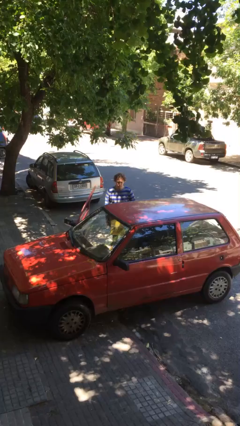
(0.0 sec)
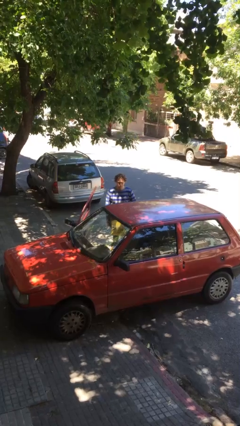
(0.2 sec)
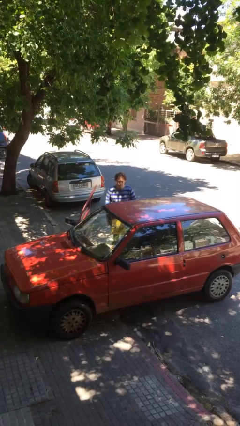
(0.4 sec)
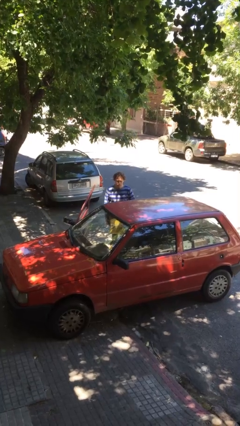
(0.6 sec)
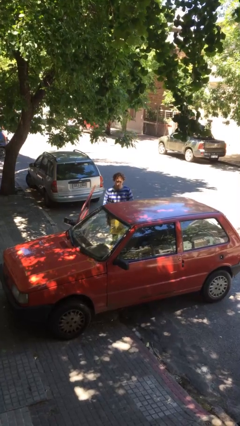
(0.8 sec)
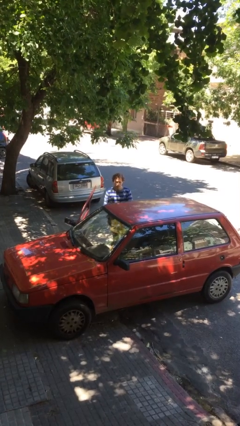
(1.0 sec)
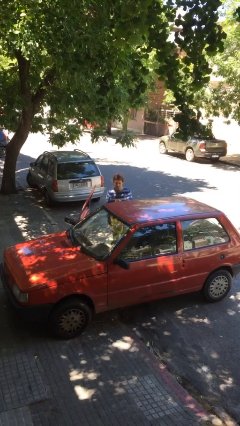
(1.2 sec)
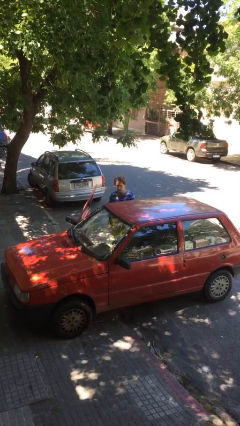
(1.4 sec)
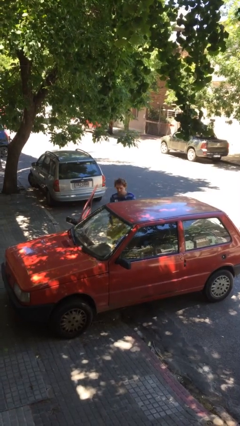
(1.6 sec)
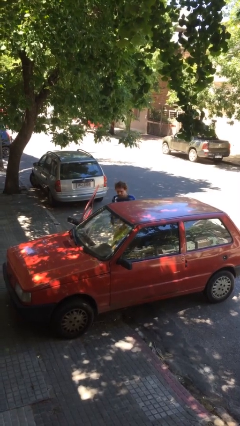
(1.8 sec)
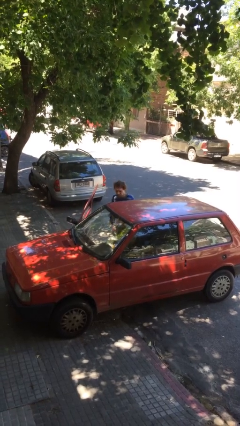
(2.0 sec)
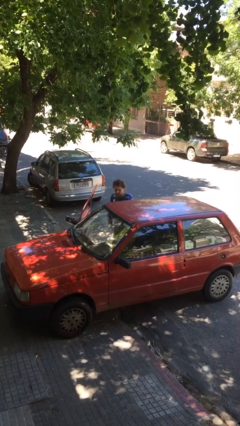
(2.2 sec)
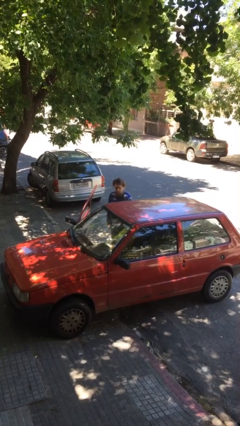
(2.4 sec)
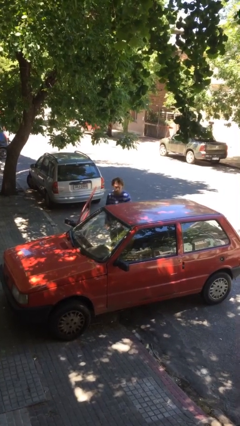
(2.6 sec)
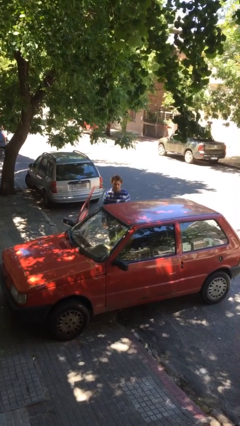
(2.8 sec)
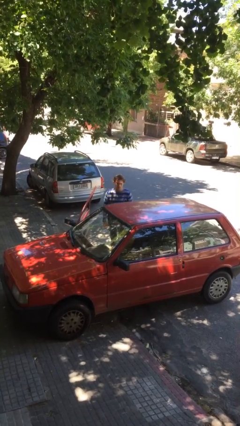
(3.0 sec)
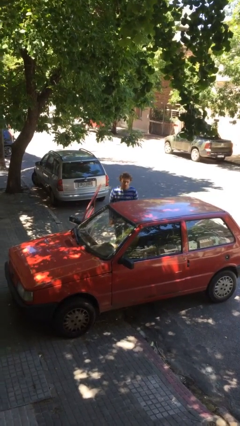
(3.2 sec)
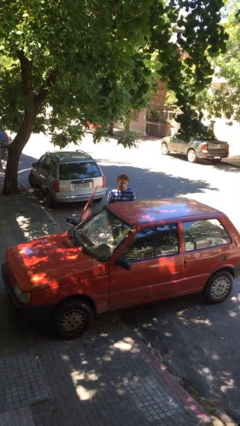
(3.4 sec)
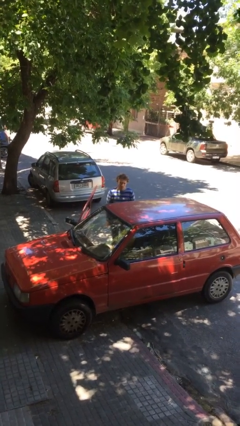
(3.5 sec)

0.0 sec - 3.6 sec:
person loads car

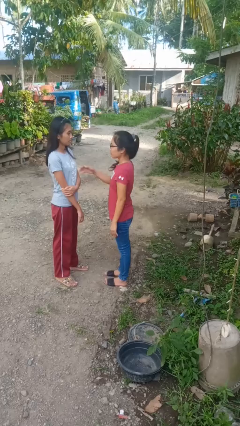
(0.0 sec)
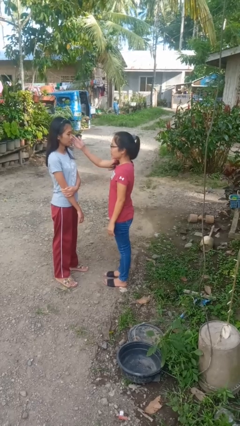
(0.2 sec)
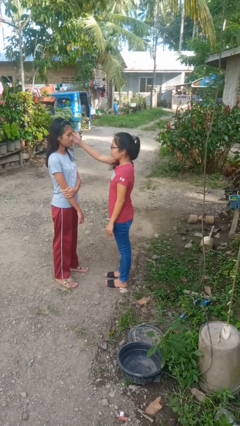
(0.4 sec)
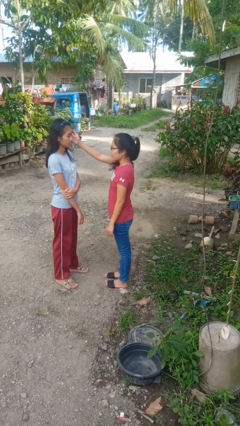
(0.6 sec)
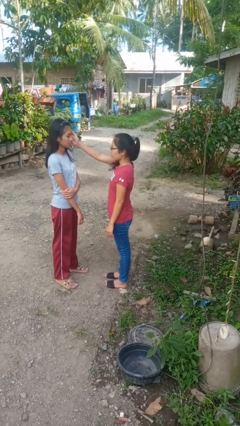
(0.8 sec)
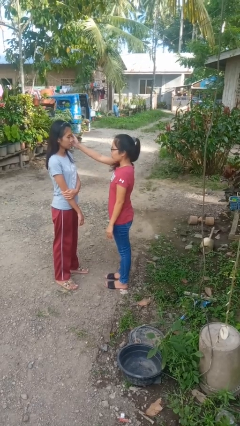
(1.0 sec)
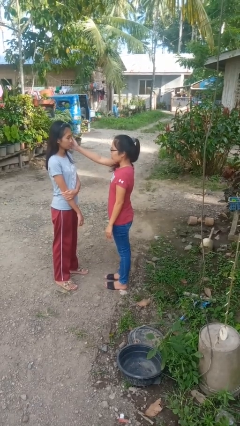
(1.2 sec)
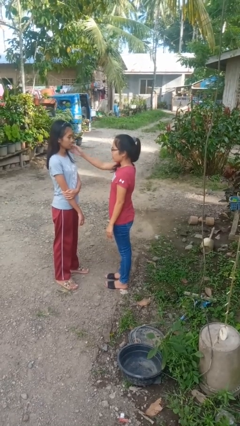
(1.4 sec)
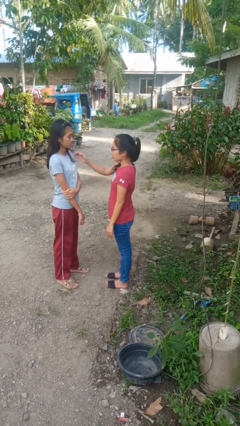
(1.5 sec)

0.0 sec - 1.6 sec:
person touches face of person

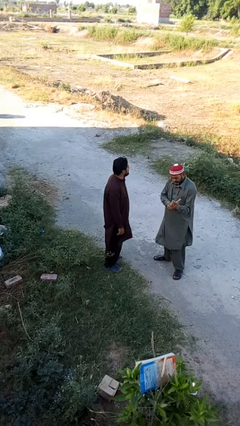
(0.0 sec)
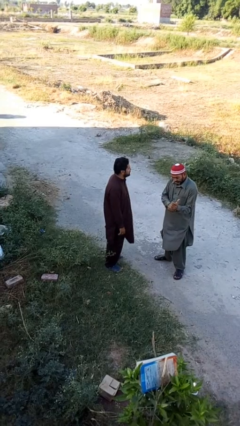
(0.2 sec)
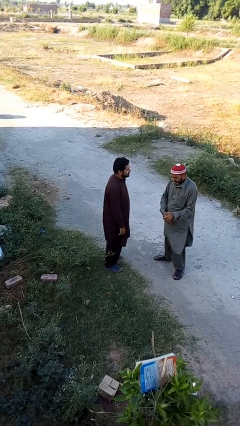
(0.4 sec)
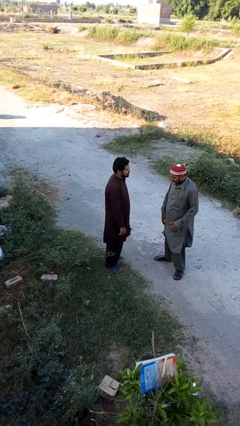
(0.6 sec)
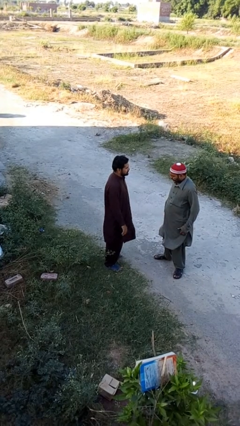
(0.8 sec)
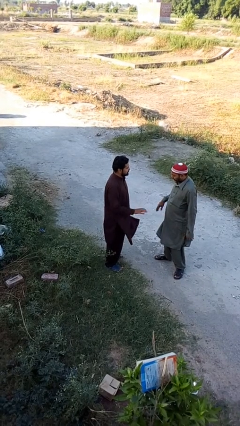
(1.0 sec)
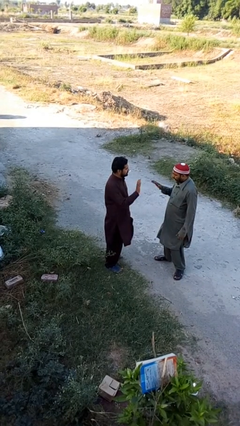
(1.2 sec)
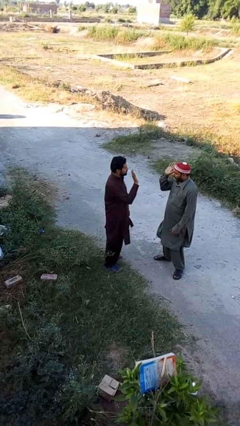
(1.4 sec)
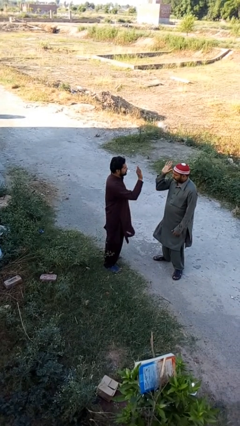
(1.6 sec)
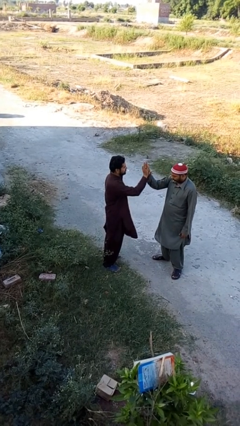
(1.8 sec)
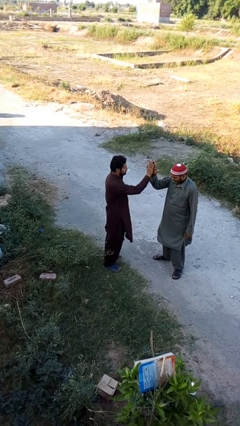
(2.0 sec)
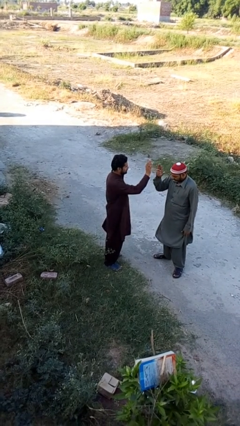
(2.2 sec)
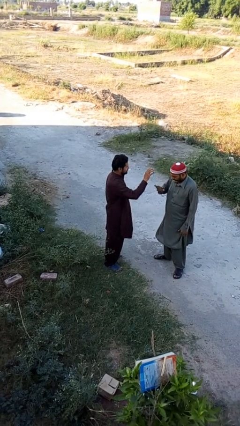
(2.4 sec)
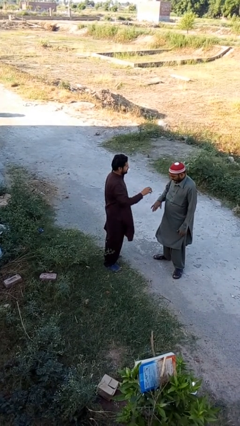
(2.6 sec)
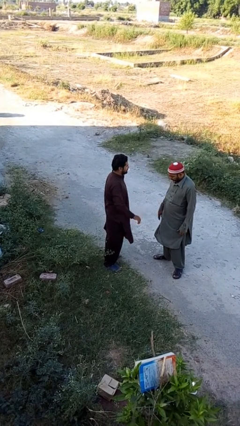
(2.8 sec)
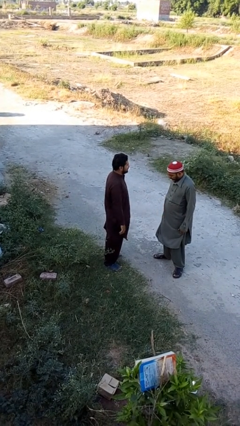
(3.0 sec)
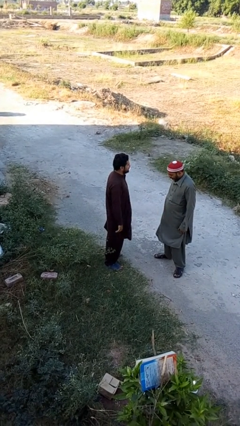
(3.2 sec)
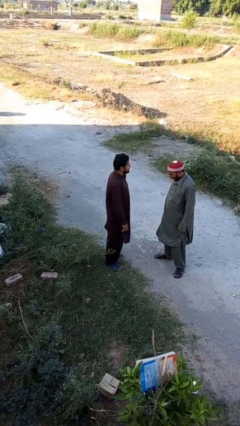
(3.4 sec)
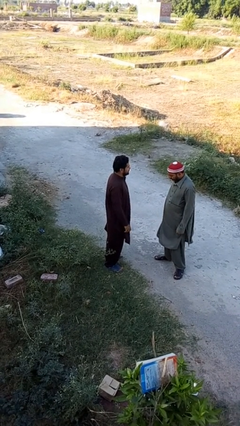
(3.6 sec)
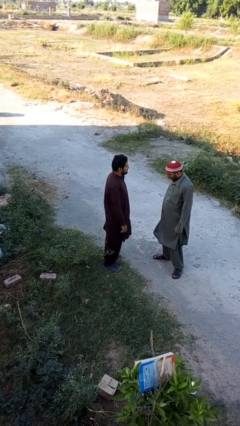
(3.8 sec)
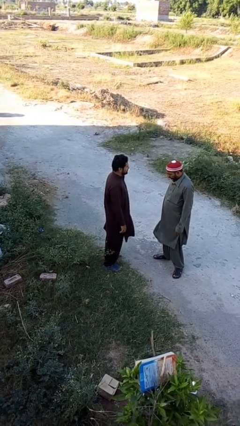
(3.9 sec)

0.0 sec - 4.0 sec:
person highfives hand

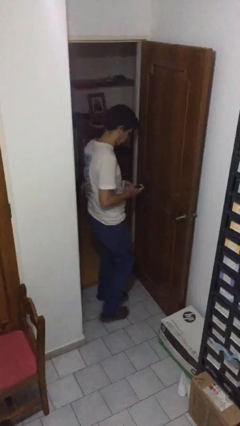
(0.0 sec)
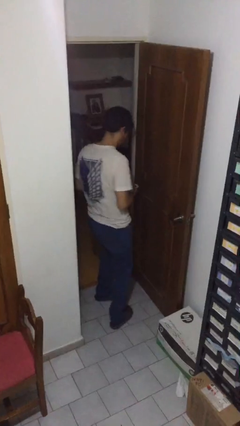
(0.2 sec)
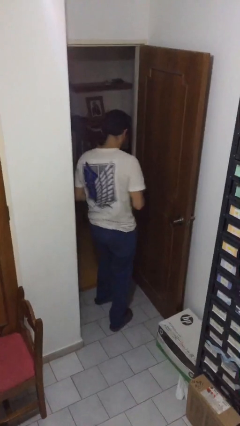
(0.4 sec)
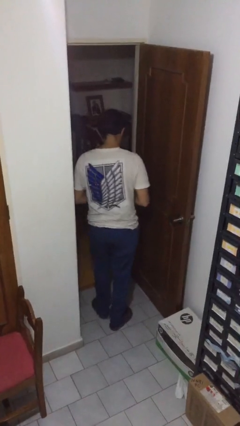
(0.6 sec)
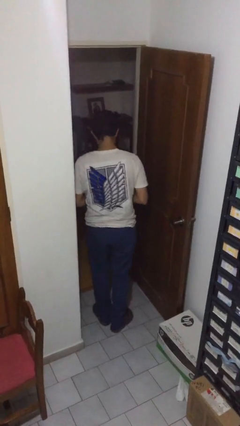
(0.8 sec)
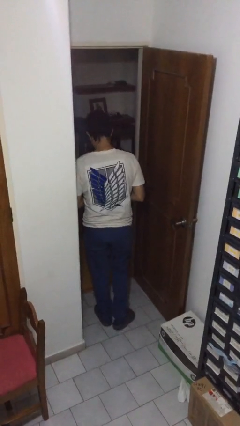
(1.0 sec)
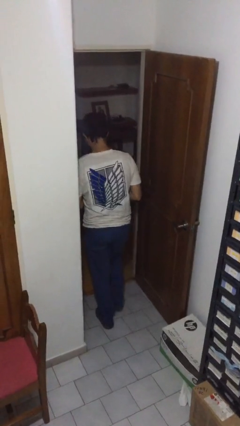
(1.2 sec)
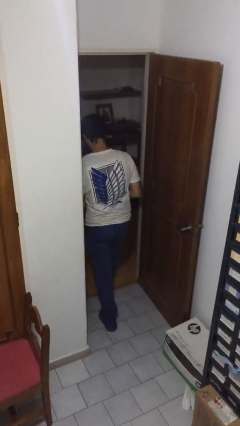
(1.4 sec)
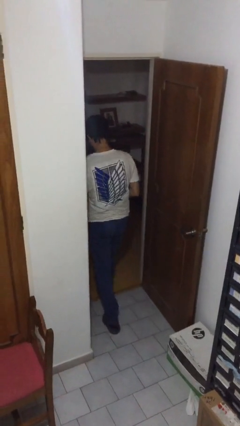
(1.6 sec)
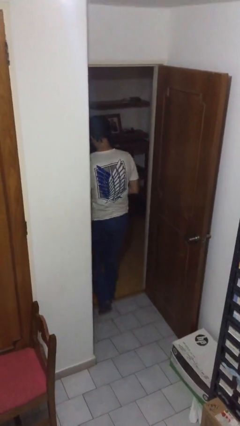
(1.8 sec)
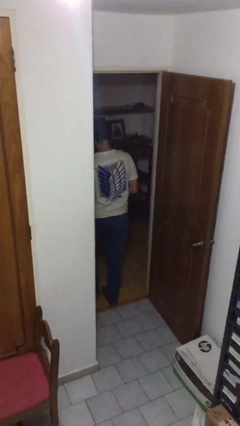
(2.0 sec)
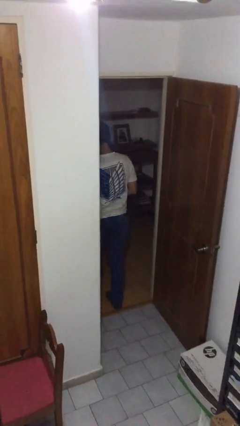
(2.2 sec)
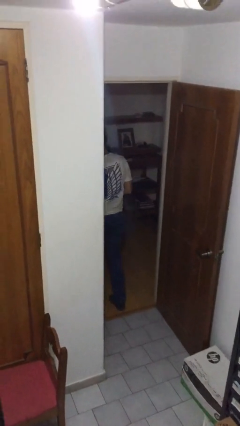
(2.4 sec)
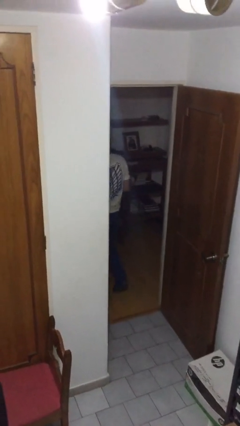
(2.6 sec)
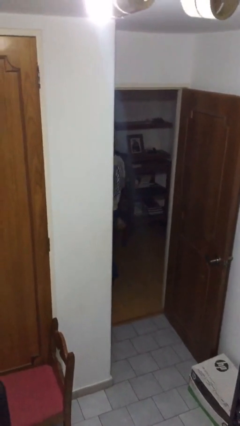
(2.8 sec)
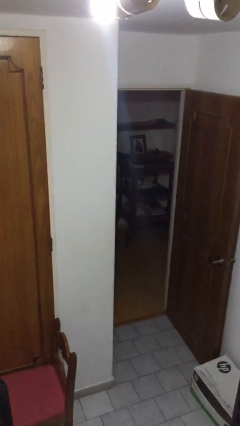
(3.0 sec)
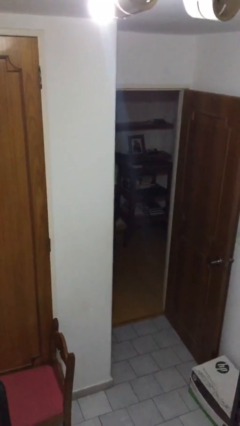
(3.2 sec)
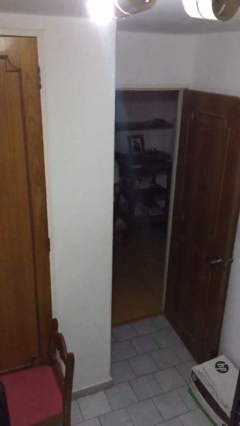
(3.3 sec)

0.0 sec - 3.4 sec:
person exits scene through structure

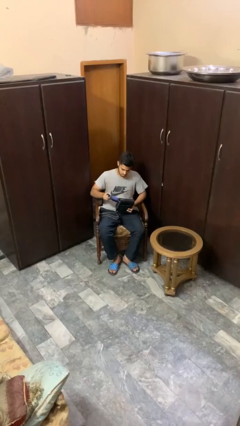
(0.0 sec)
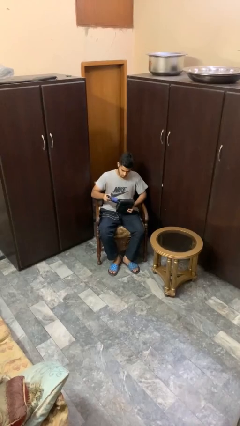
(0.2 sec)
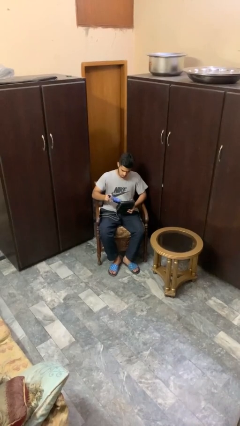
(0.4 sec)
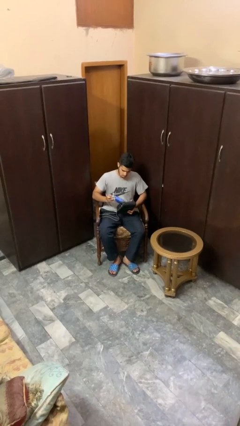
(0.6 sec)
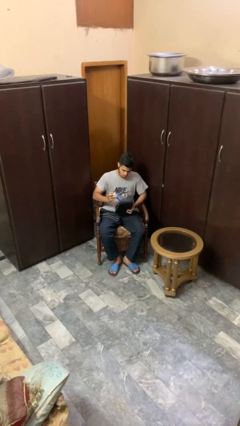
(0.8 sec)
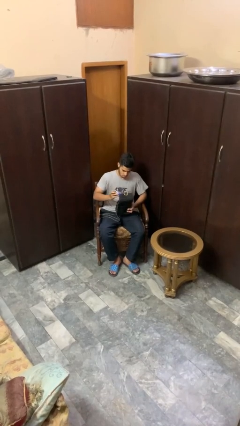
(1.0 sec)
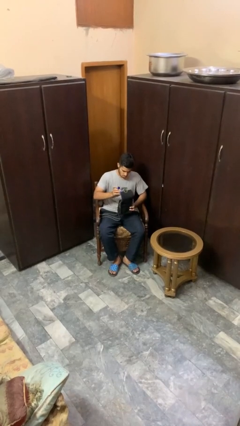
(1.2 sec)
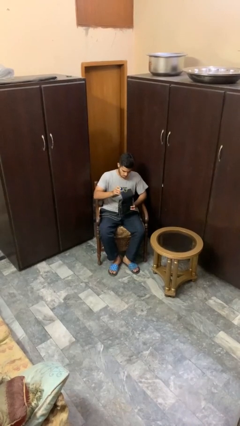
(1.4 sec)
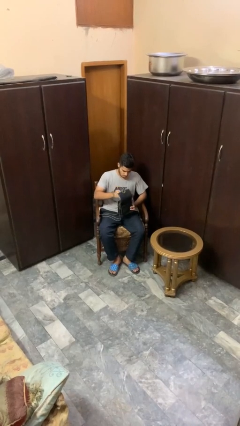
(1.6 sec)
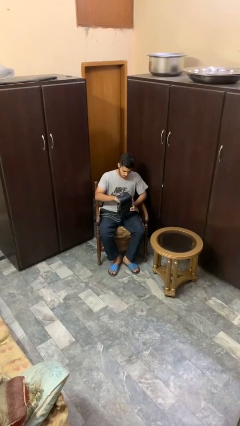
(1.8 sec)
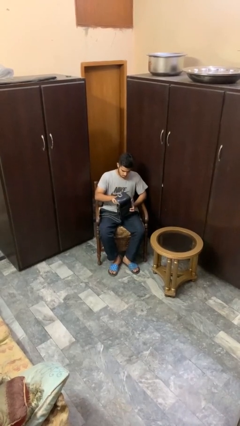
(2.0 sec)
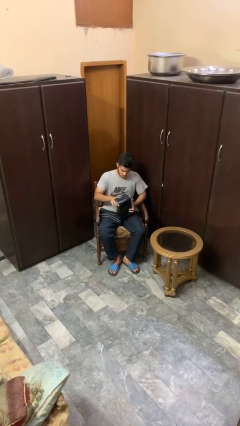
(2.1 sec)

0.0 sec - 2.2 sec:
person puts object into purse

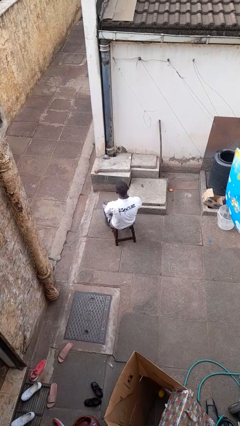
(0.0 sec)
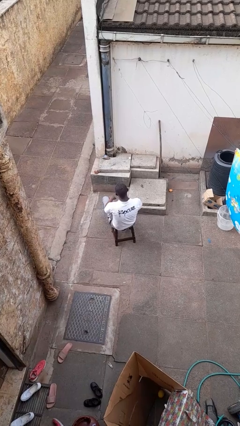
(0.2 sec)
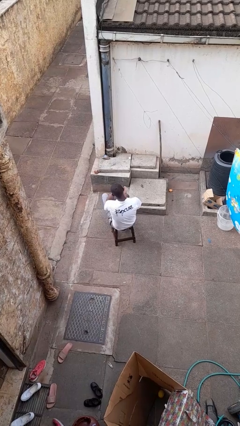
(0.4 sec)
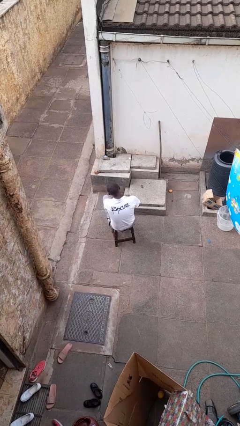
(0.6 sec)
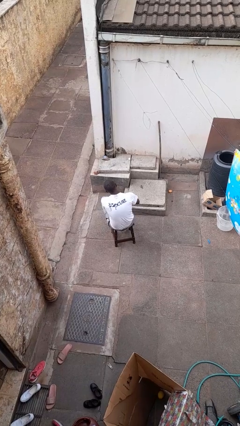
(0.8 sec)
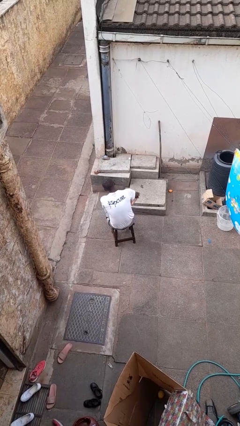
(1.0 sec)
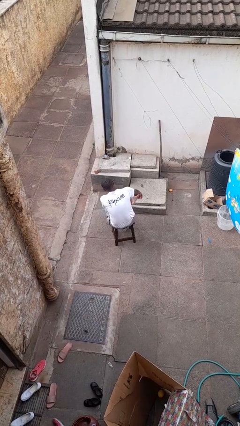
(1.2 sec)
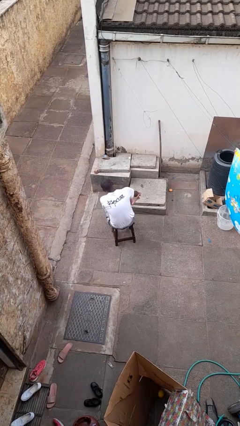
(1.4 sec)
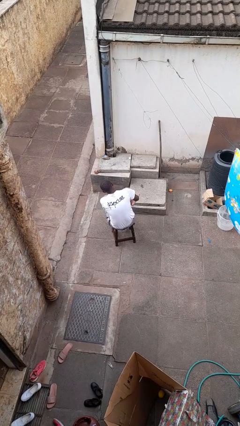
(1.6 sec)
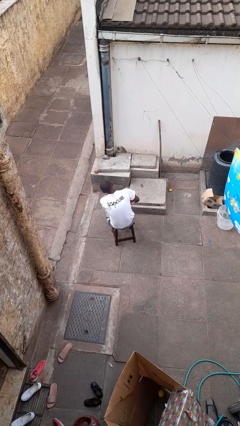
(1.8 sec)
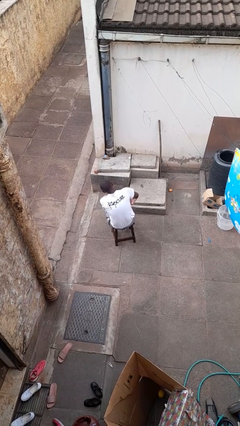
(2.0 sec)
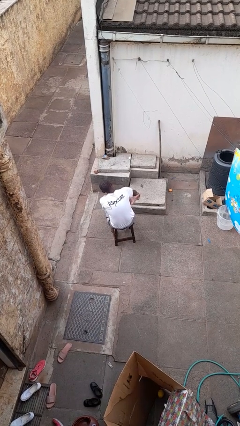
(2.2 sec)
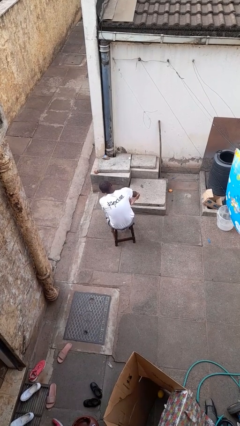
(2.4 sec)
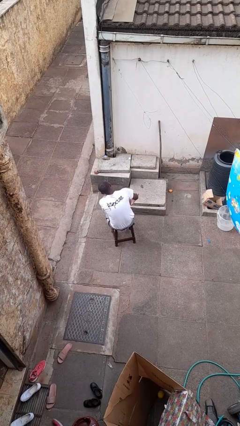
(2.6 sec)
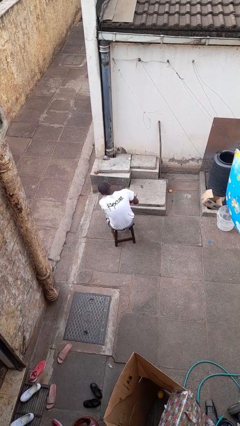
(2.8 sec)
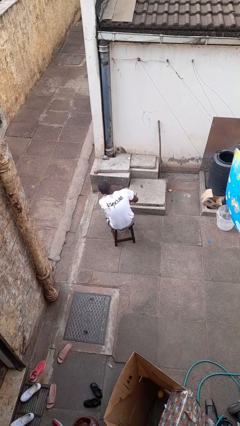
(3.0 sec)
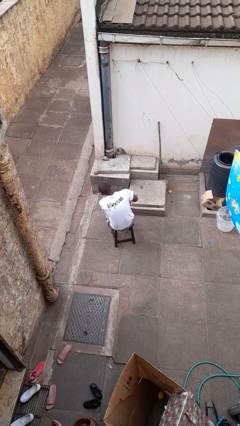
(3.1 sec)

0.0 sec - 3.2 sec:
person rubs foot
